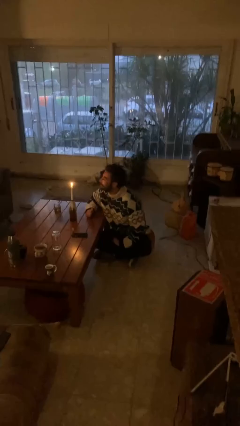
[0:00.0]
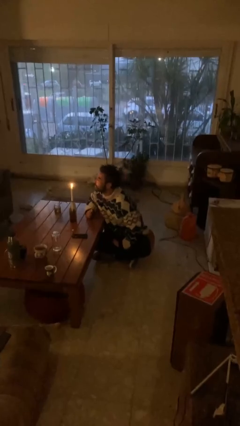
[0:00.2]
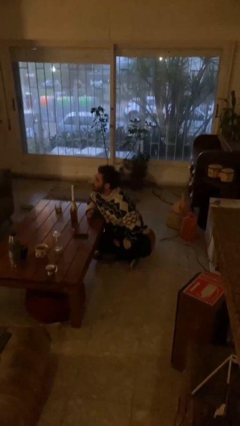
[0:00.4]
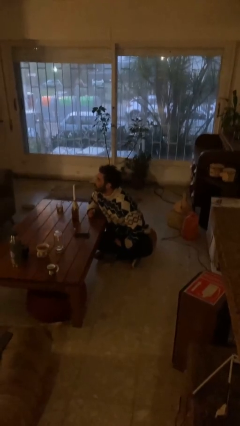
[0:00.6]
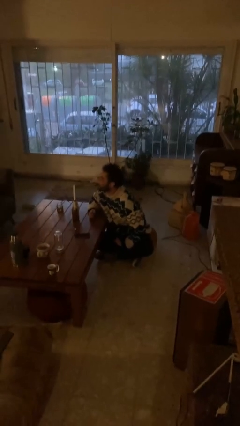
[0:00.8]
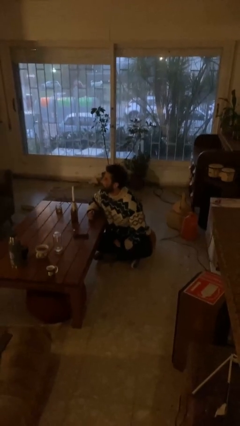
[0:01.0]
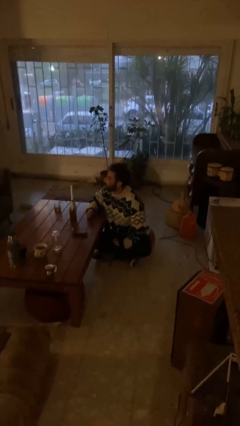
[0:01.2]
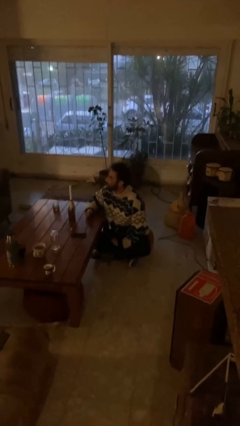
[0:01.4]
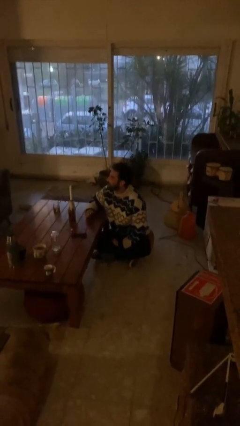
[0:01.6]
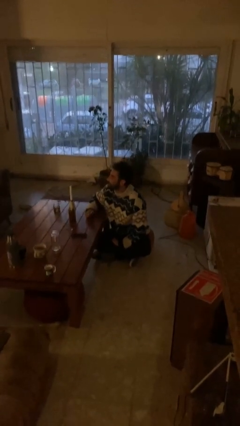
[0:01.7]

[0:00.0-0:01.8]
person extinguishes candle

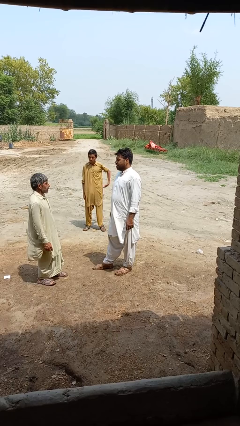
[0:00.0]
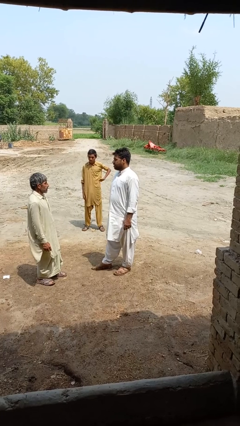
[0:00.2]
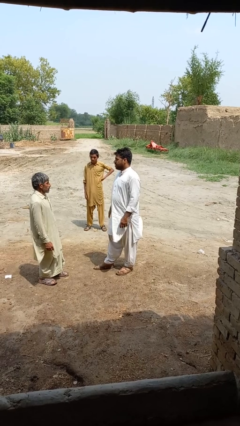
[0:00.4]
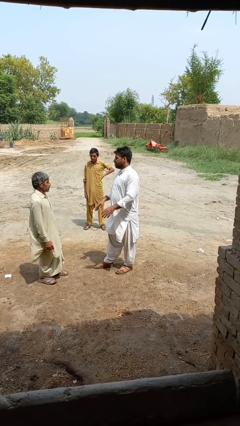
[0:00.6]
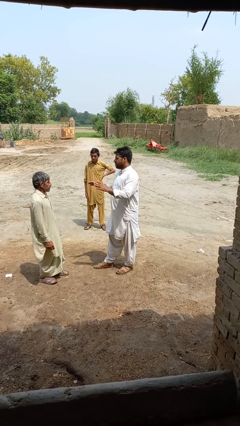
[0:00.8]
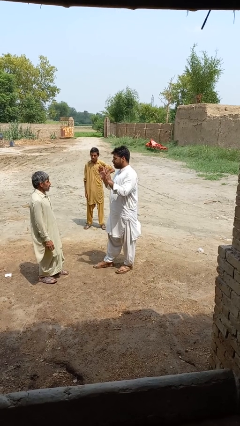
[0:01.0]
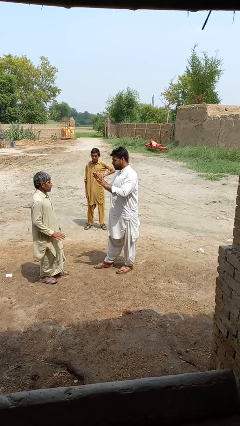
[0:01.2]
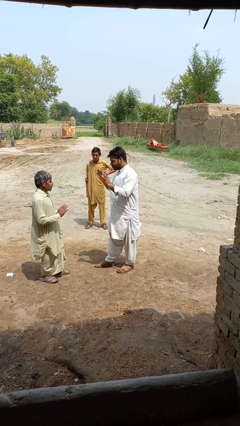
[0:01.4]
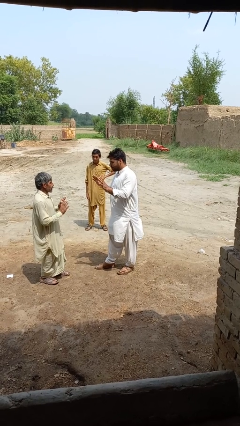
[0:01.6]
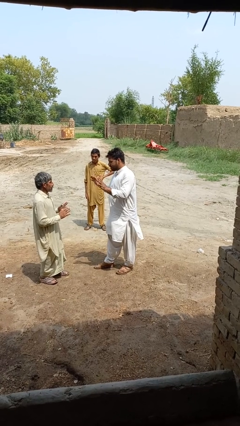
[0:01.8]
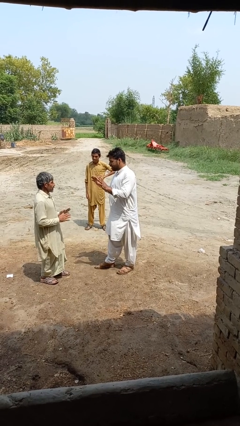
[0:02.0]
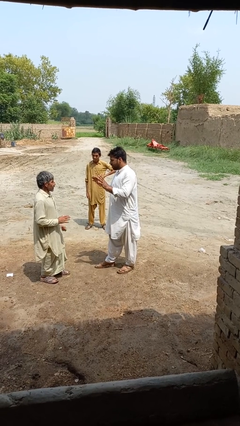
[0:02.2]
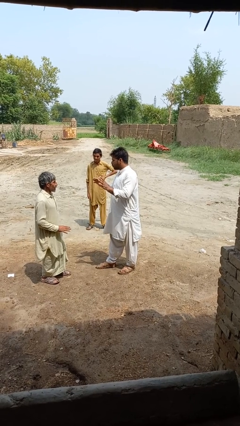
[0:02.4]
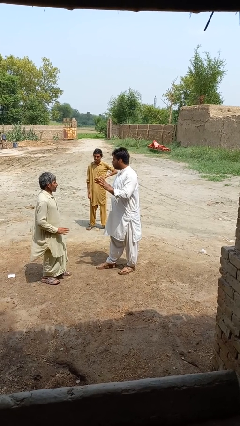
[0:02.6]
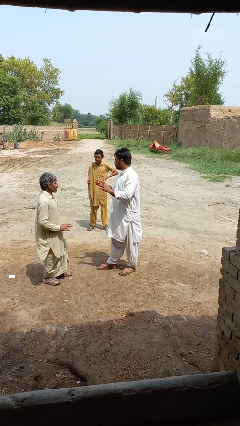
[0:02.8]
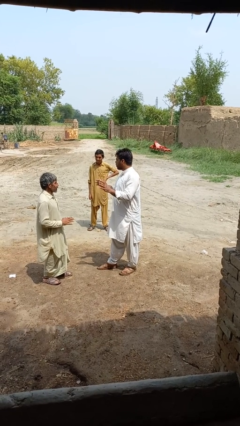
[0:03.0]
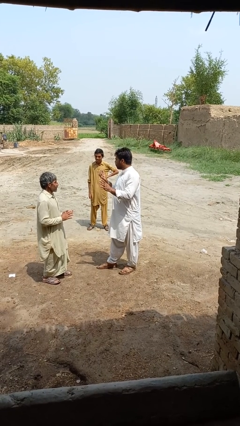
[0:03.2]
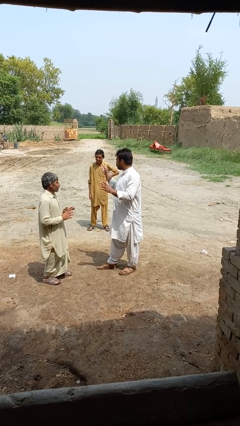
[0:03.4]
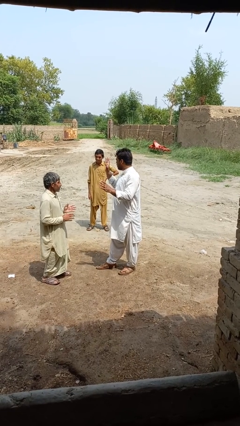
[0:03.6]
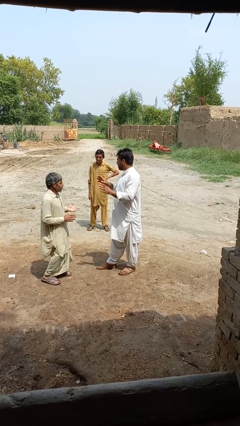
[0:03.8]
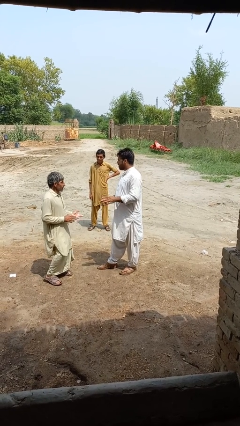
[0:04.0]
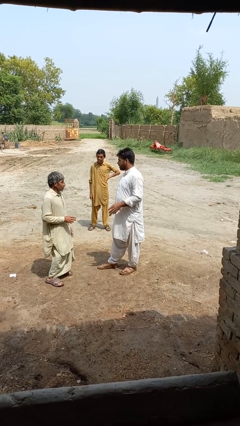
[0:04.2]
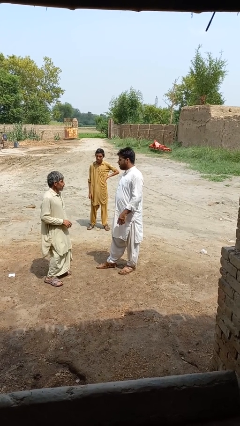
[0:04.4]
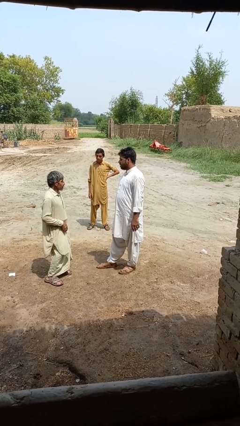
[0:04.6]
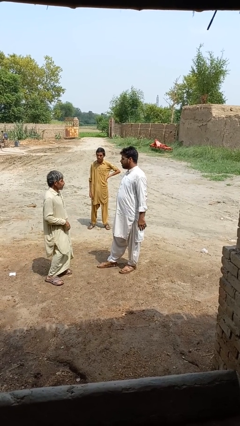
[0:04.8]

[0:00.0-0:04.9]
person talks to person

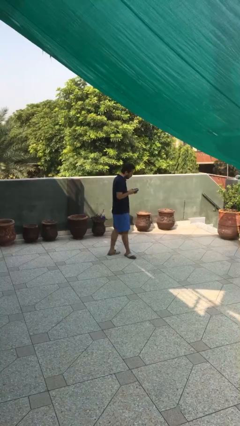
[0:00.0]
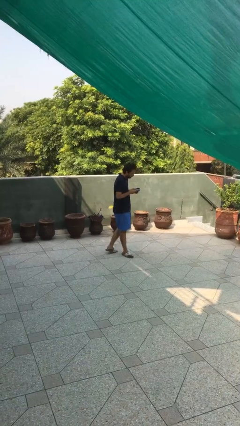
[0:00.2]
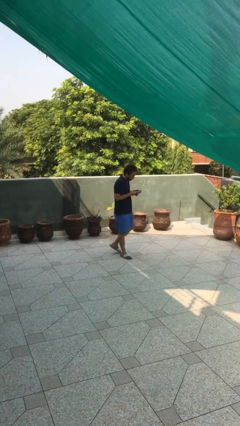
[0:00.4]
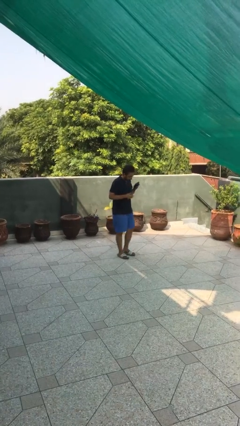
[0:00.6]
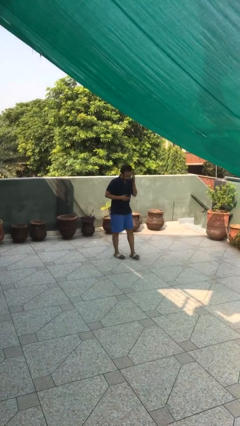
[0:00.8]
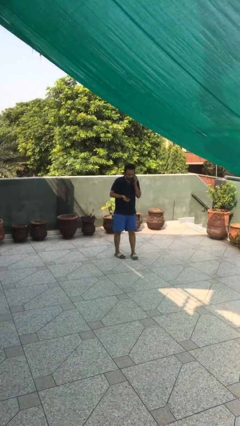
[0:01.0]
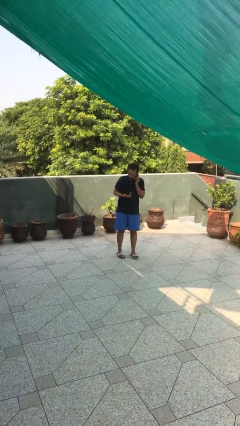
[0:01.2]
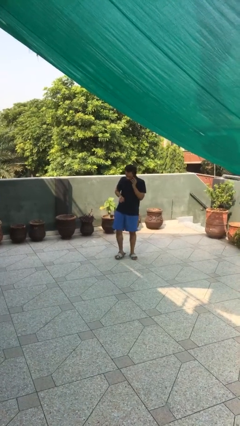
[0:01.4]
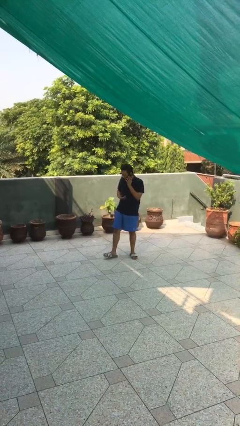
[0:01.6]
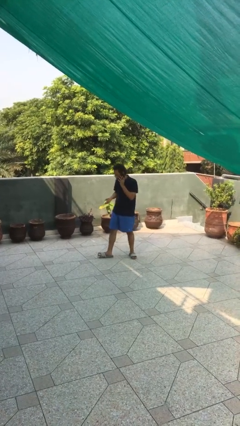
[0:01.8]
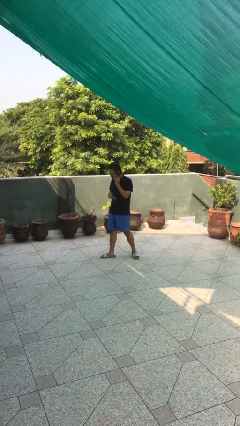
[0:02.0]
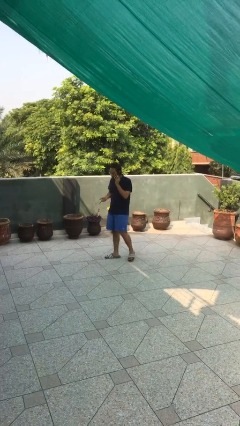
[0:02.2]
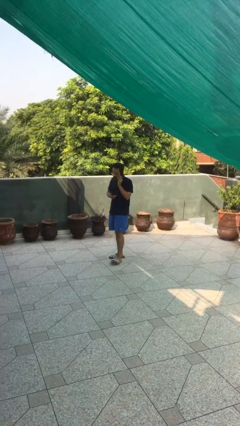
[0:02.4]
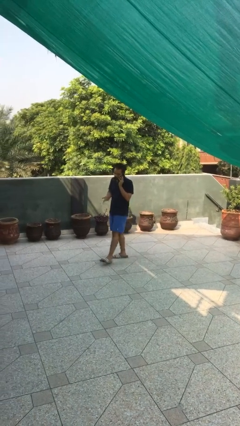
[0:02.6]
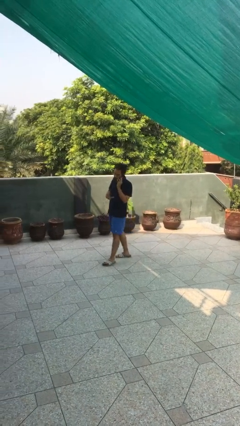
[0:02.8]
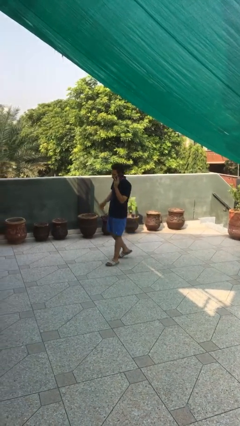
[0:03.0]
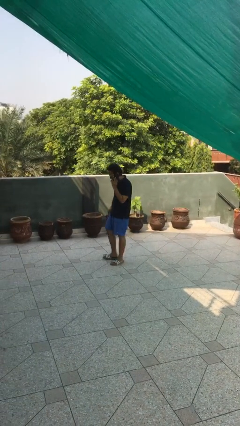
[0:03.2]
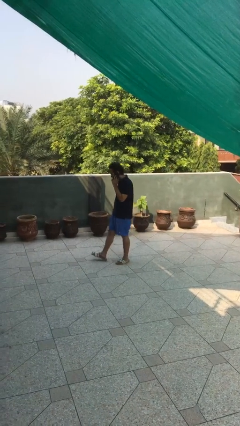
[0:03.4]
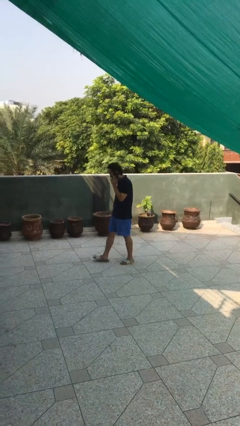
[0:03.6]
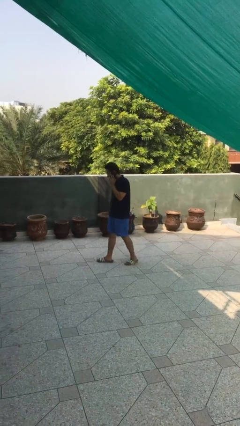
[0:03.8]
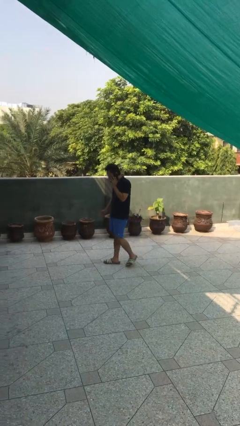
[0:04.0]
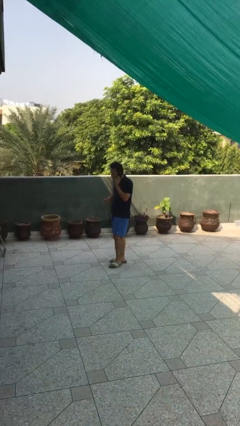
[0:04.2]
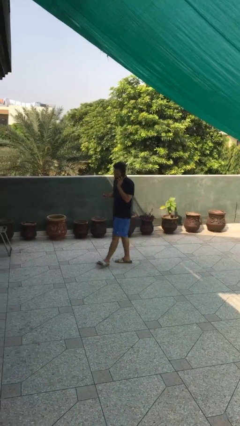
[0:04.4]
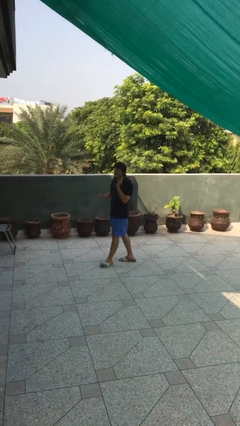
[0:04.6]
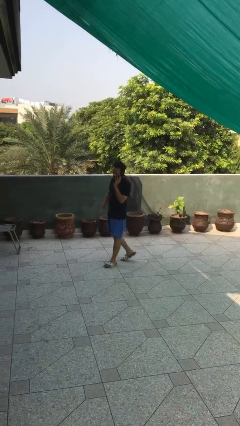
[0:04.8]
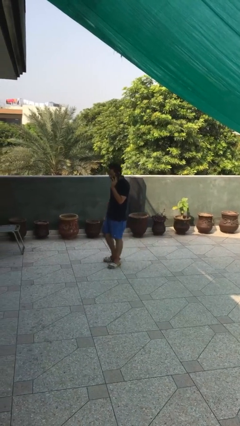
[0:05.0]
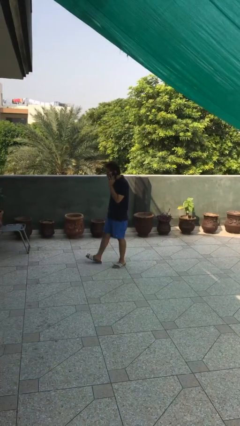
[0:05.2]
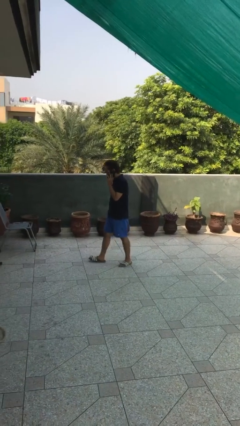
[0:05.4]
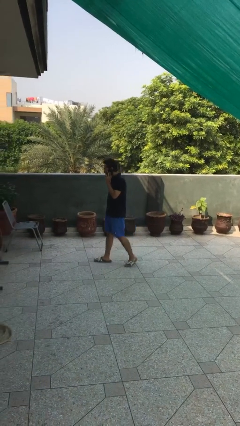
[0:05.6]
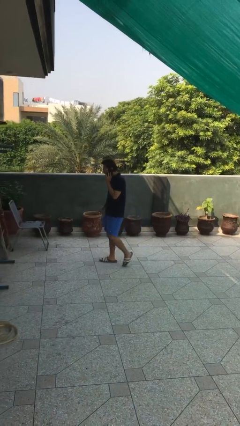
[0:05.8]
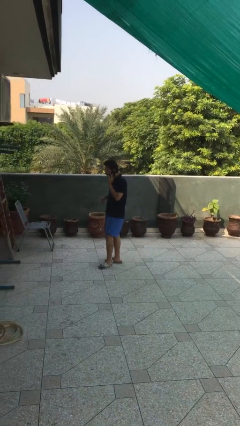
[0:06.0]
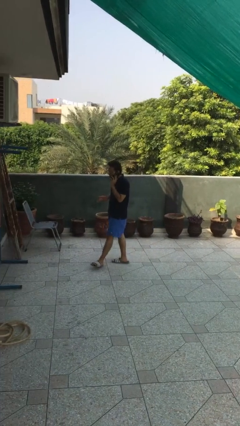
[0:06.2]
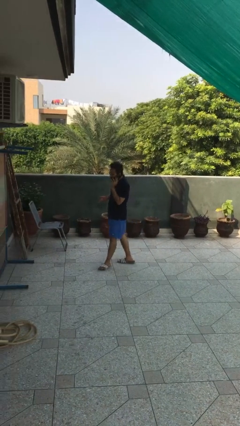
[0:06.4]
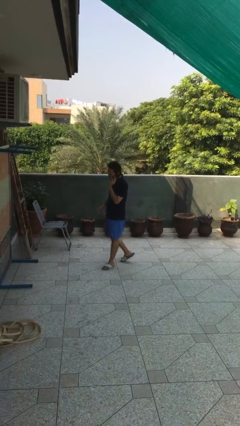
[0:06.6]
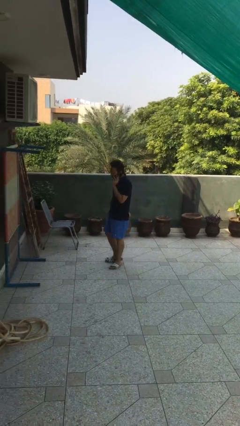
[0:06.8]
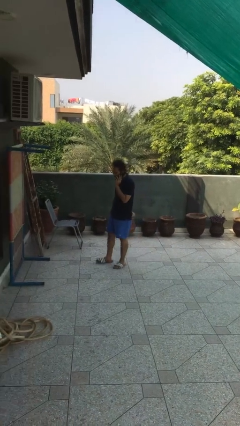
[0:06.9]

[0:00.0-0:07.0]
person talks on phone

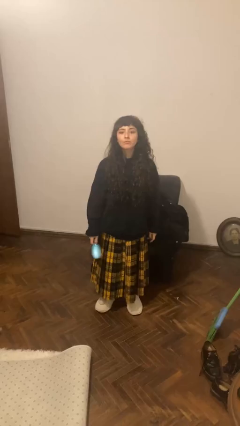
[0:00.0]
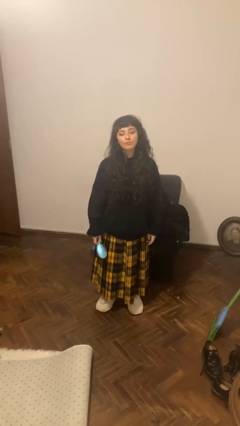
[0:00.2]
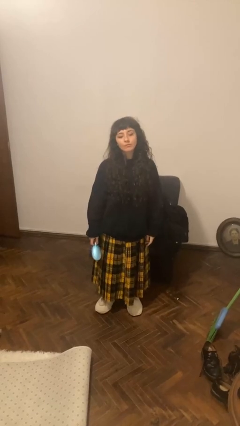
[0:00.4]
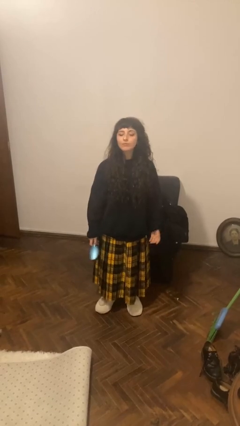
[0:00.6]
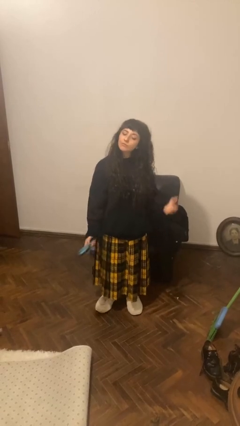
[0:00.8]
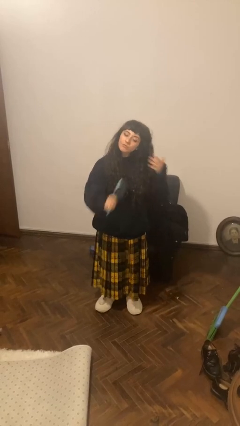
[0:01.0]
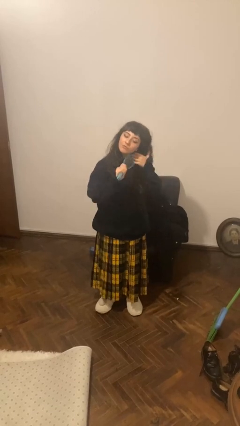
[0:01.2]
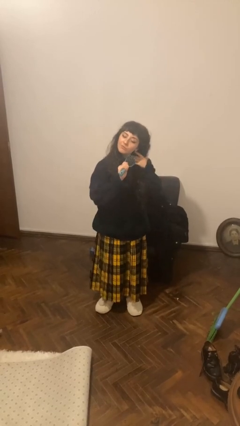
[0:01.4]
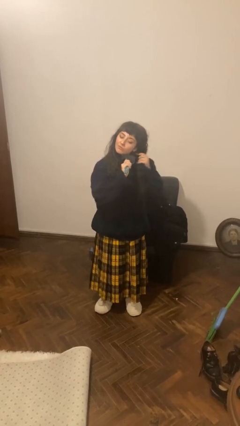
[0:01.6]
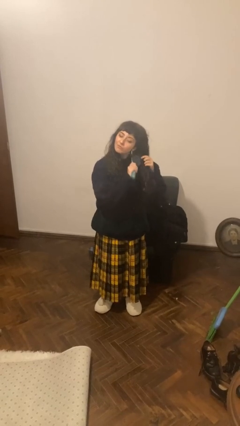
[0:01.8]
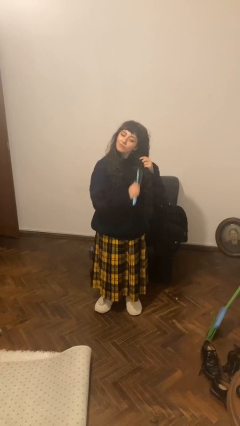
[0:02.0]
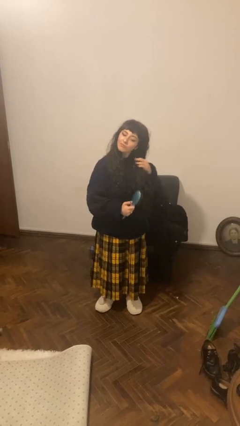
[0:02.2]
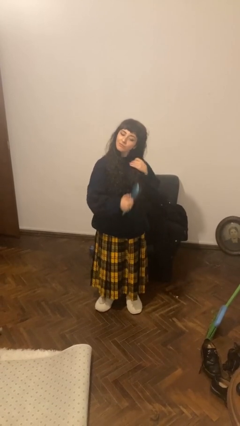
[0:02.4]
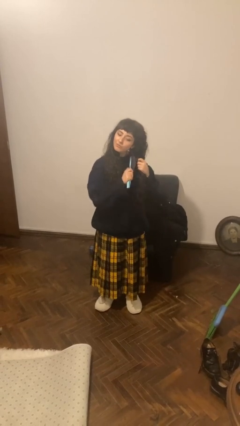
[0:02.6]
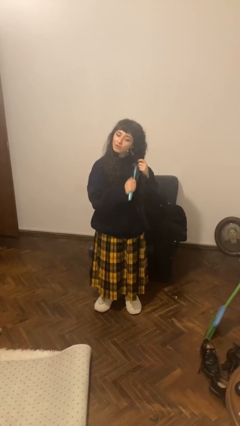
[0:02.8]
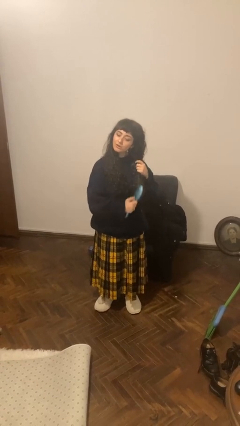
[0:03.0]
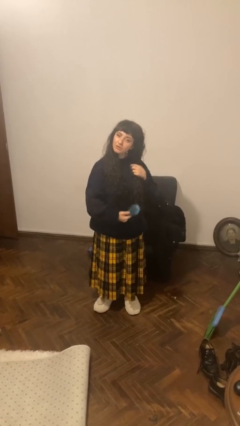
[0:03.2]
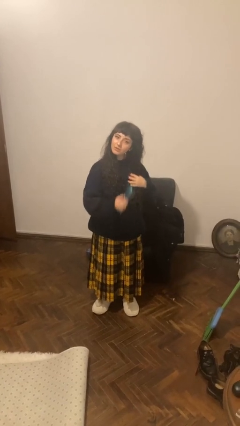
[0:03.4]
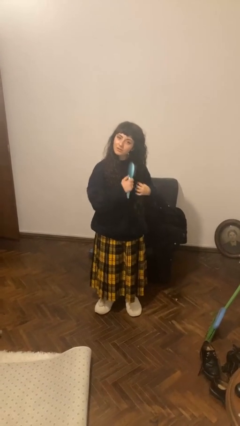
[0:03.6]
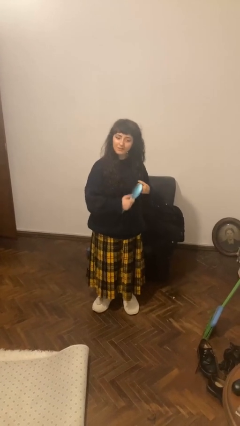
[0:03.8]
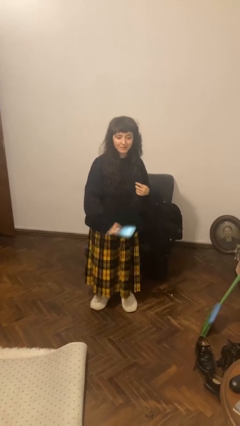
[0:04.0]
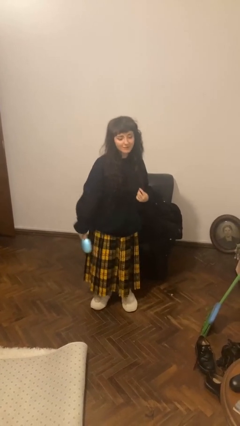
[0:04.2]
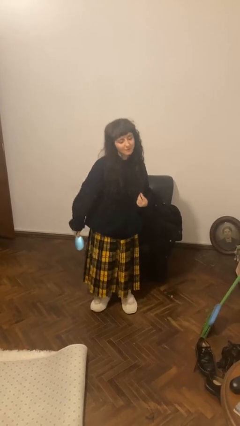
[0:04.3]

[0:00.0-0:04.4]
person brushes hair
